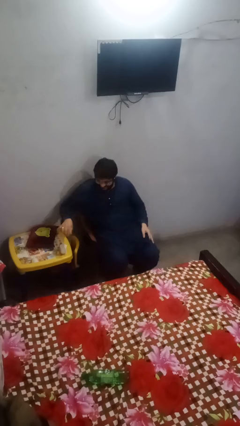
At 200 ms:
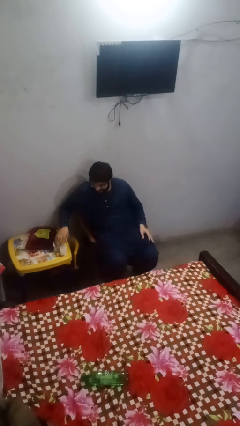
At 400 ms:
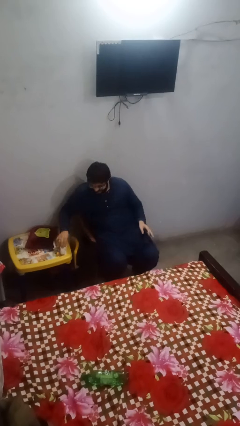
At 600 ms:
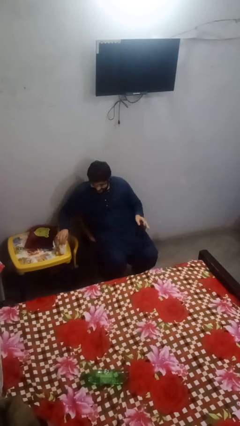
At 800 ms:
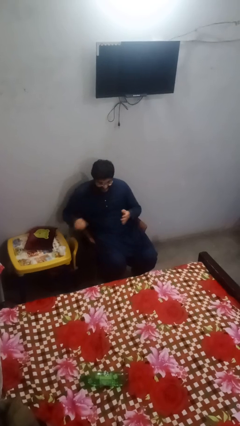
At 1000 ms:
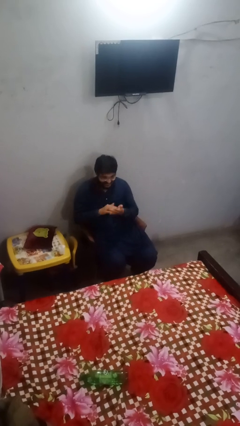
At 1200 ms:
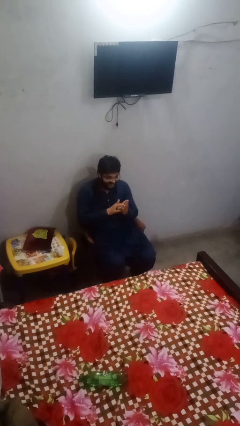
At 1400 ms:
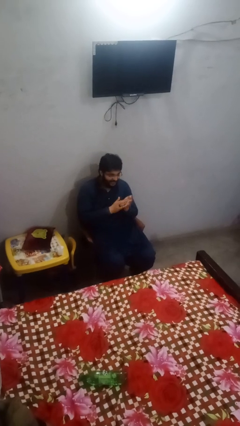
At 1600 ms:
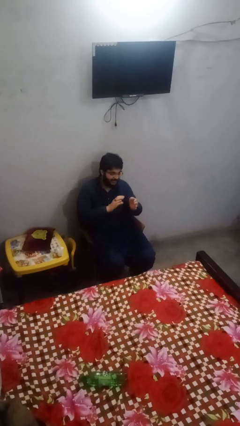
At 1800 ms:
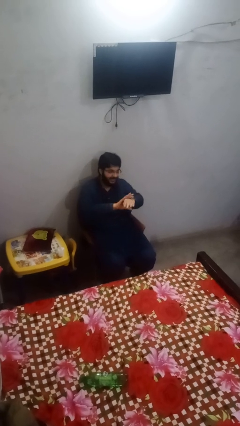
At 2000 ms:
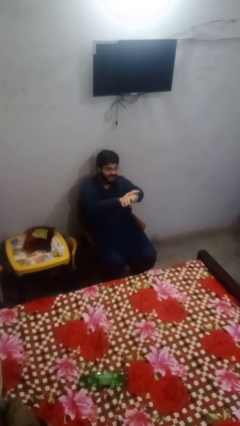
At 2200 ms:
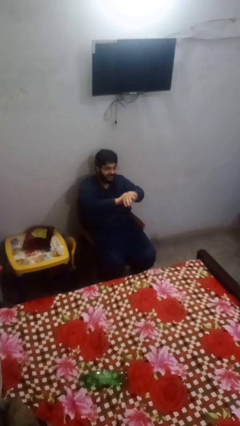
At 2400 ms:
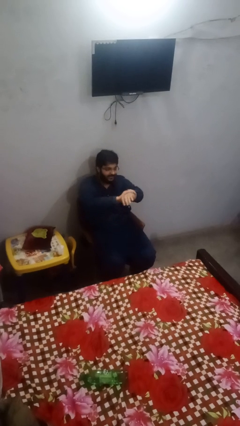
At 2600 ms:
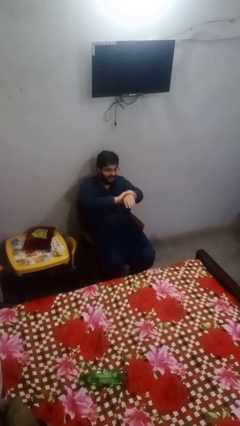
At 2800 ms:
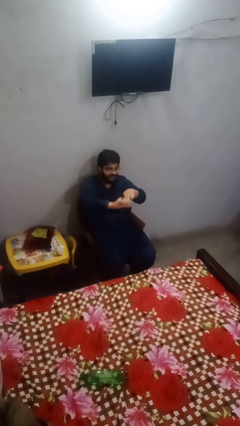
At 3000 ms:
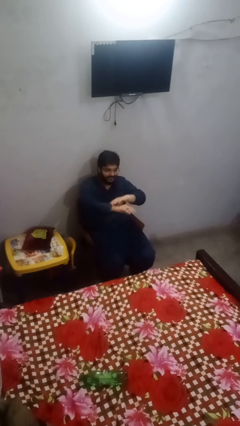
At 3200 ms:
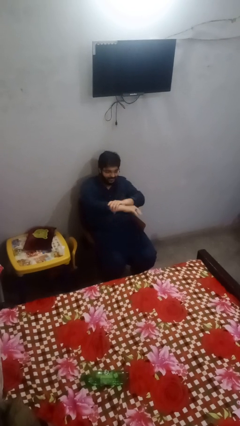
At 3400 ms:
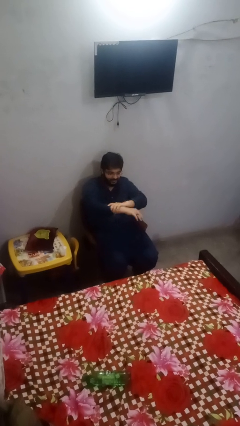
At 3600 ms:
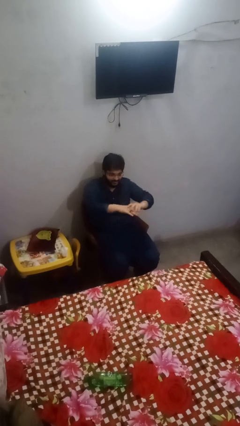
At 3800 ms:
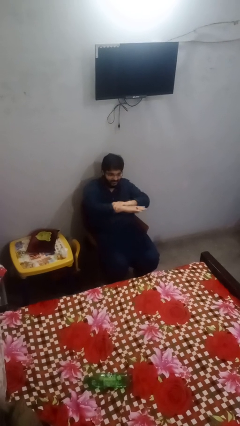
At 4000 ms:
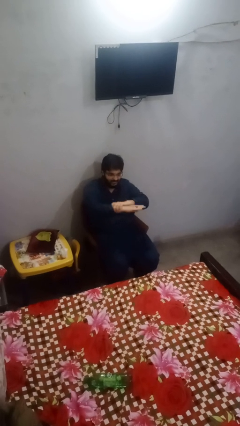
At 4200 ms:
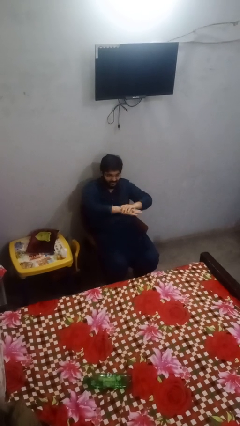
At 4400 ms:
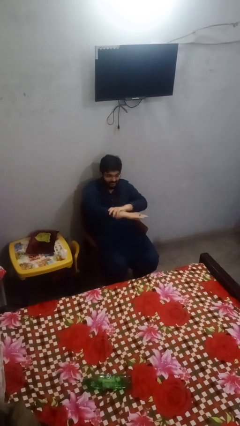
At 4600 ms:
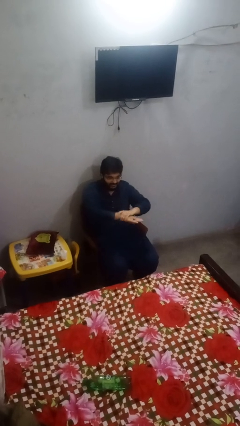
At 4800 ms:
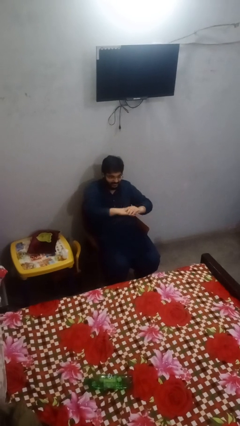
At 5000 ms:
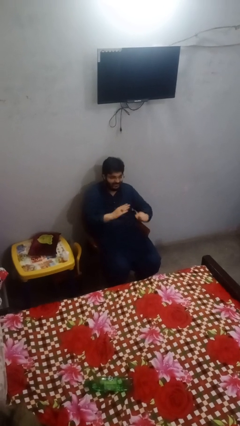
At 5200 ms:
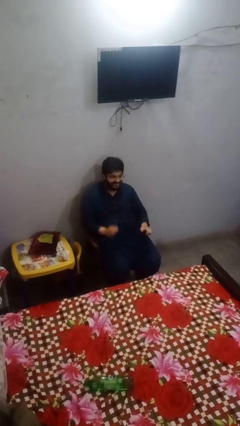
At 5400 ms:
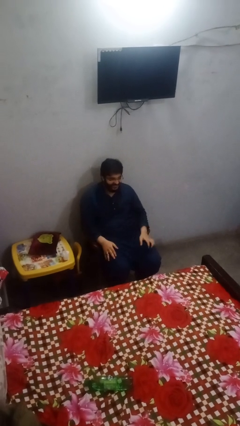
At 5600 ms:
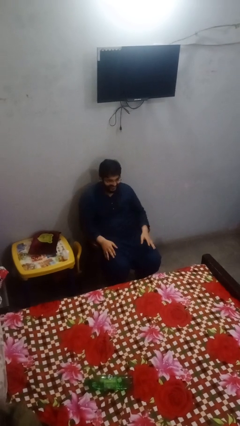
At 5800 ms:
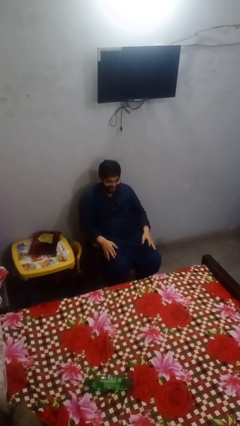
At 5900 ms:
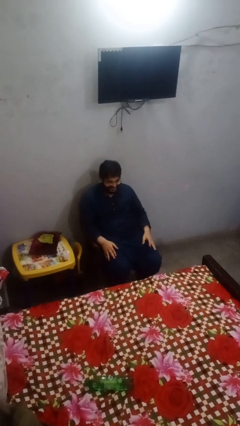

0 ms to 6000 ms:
person applies sunscreen

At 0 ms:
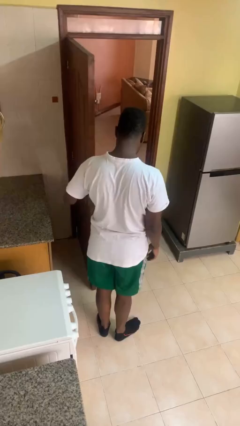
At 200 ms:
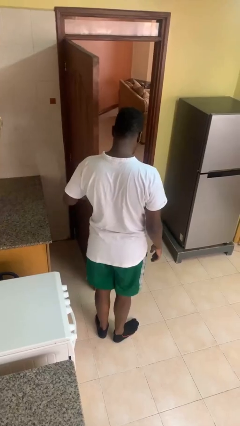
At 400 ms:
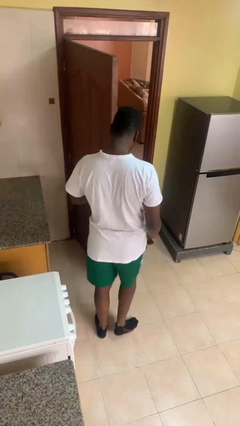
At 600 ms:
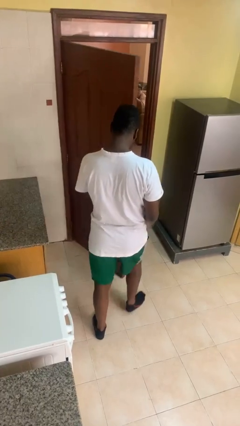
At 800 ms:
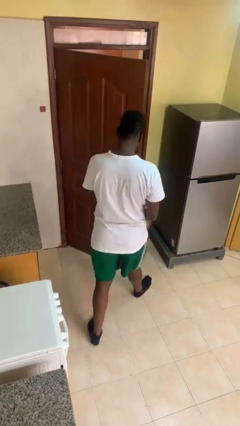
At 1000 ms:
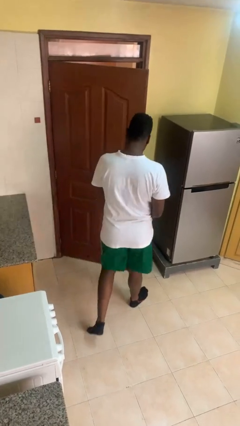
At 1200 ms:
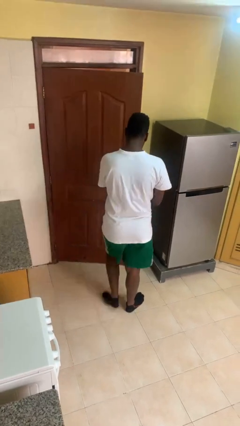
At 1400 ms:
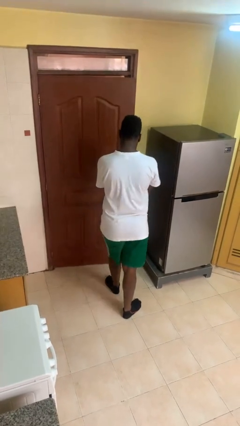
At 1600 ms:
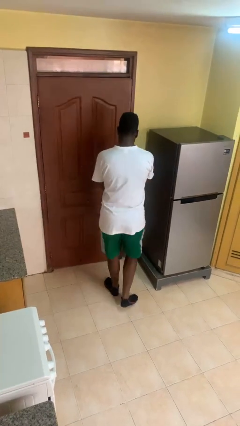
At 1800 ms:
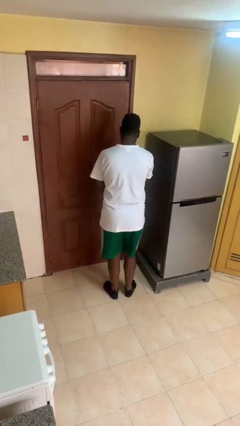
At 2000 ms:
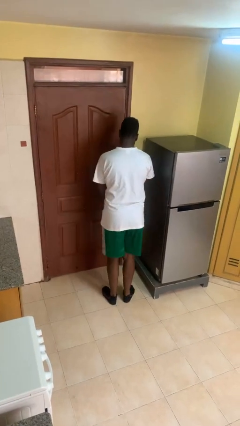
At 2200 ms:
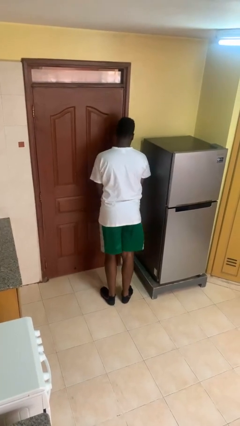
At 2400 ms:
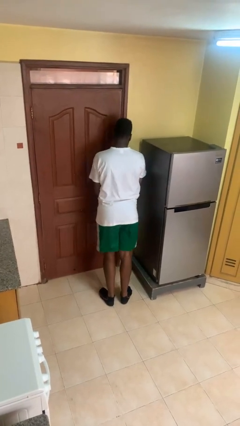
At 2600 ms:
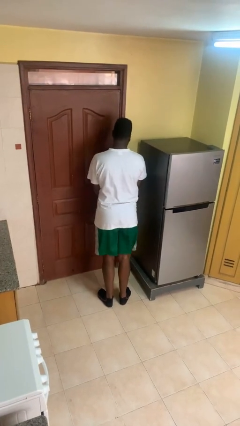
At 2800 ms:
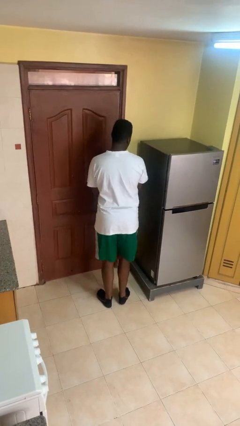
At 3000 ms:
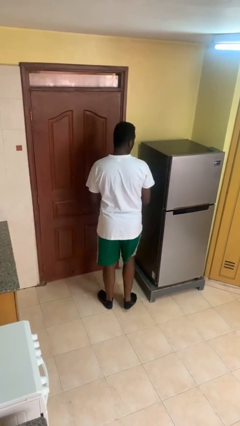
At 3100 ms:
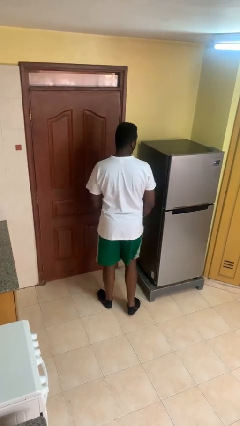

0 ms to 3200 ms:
person closes facility door

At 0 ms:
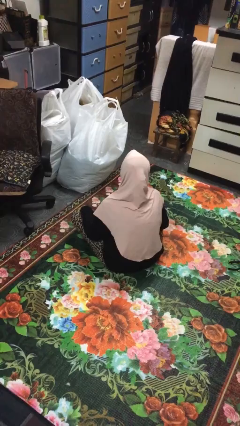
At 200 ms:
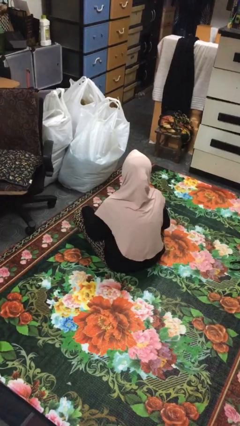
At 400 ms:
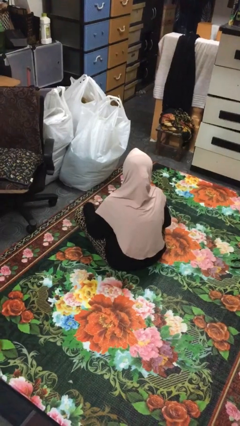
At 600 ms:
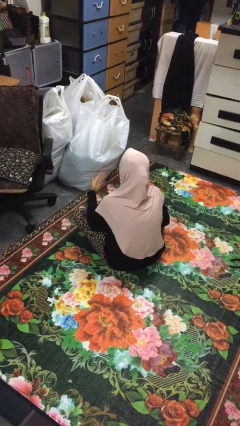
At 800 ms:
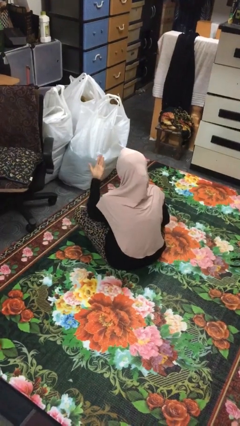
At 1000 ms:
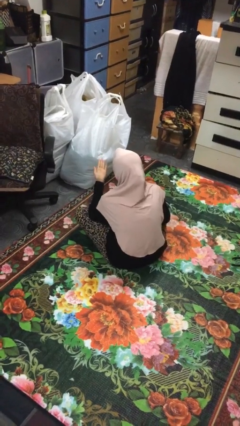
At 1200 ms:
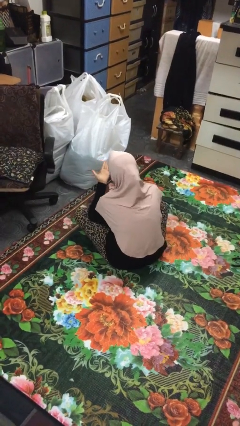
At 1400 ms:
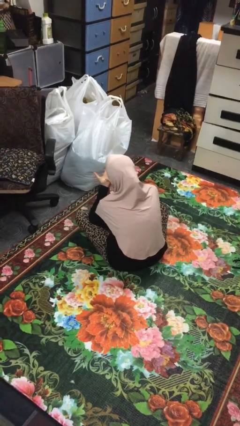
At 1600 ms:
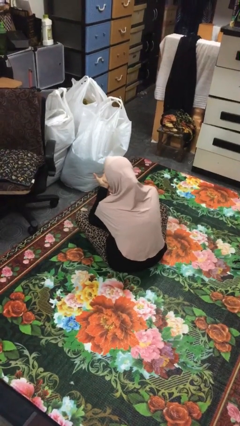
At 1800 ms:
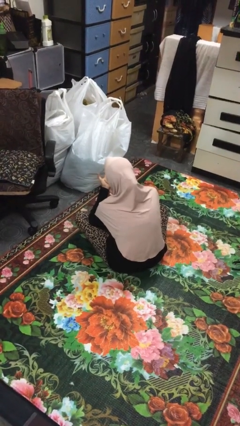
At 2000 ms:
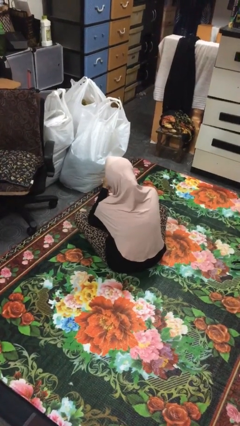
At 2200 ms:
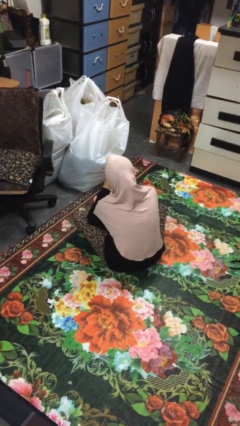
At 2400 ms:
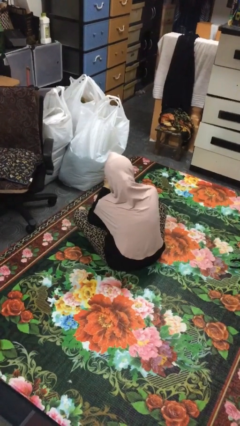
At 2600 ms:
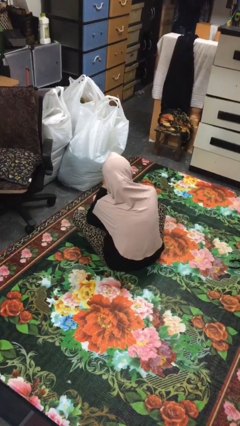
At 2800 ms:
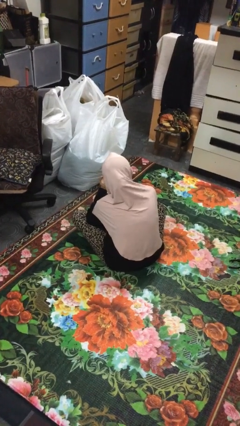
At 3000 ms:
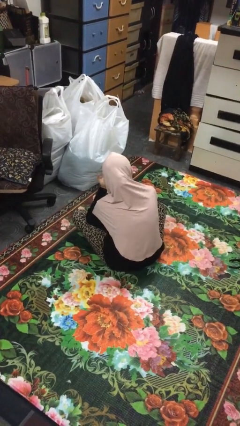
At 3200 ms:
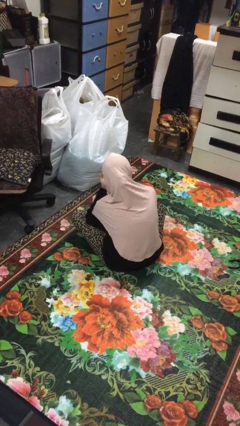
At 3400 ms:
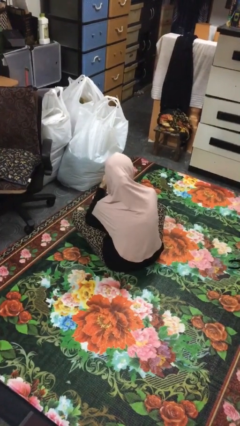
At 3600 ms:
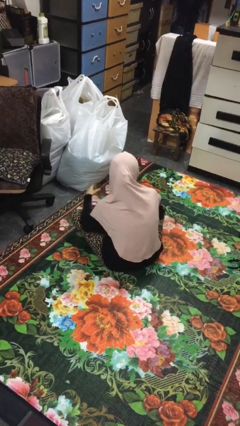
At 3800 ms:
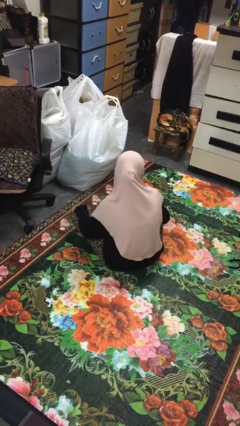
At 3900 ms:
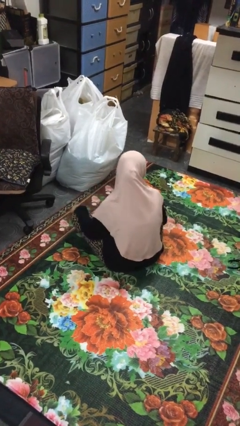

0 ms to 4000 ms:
person looks at hands in lap

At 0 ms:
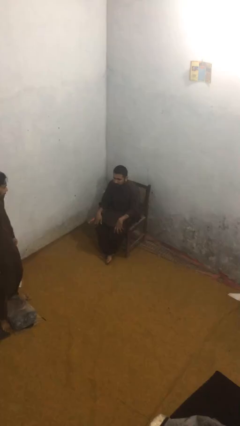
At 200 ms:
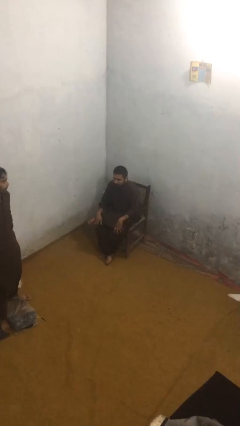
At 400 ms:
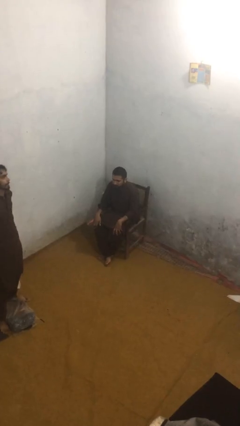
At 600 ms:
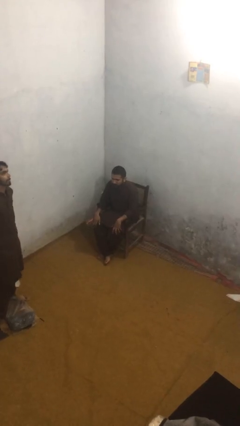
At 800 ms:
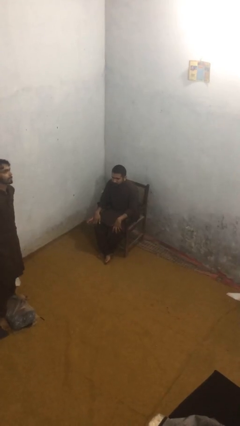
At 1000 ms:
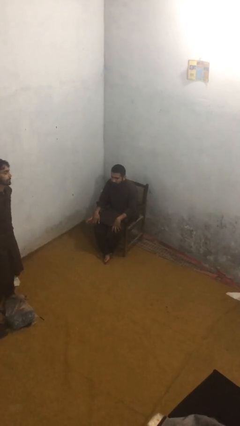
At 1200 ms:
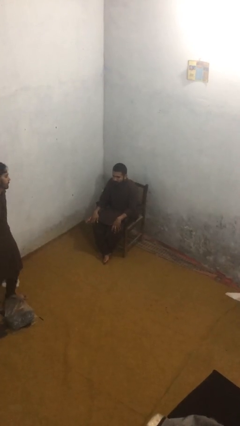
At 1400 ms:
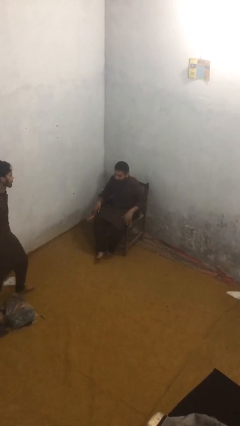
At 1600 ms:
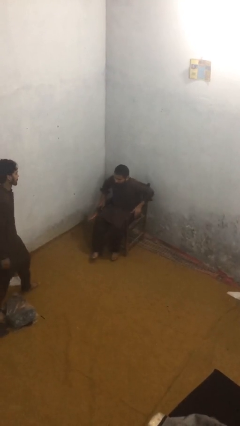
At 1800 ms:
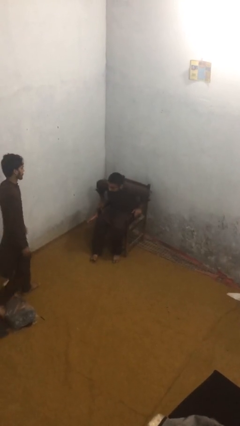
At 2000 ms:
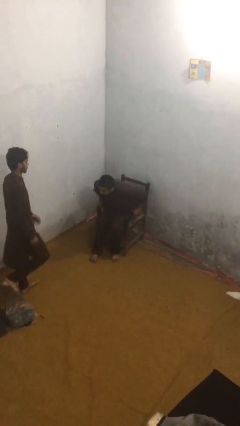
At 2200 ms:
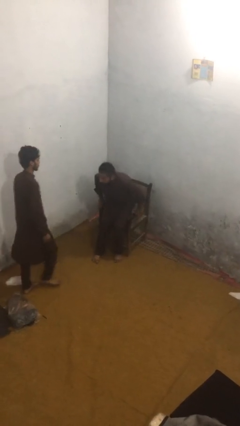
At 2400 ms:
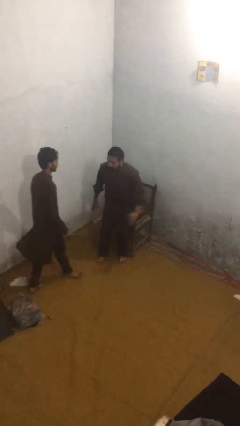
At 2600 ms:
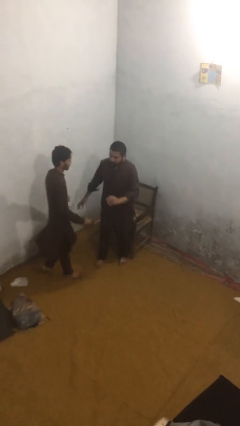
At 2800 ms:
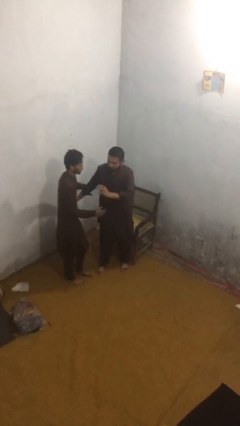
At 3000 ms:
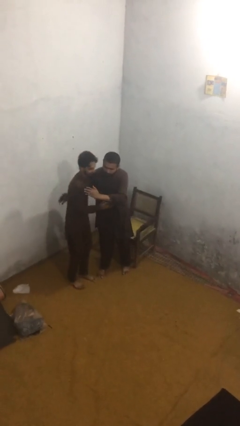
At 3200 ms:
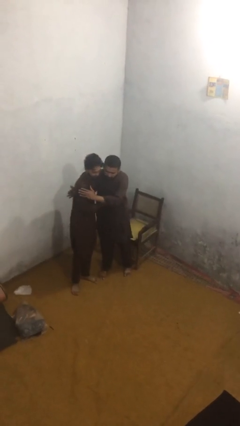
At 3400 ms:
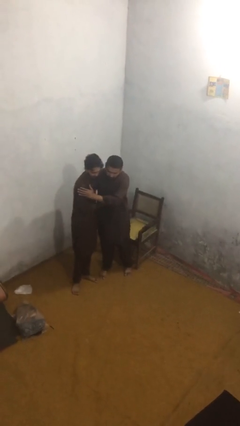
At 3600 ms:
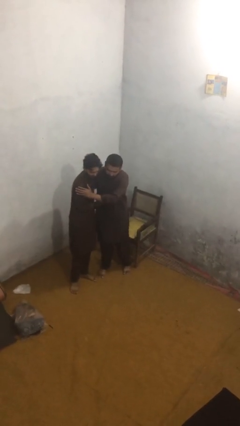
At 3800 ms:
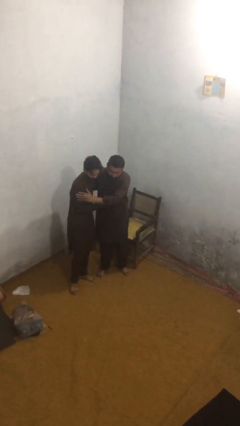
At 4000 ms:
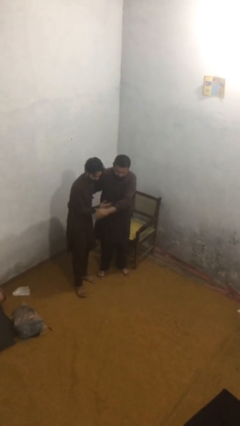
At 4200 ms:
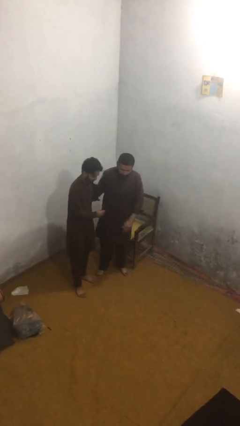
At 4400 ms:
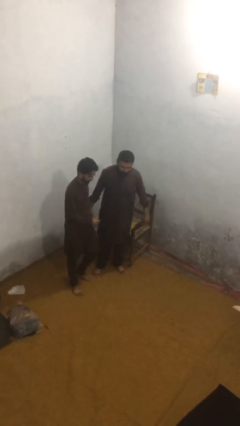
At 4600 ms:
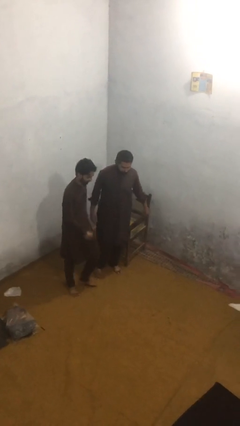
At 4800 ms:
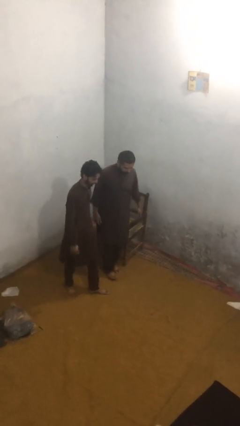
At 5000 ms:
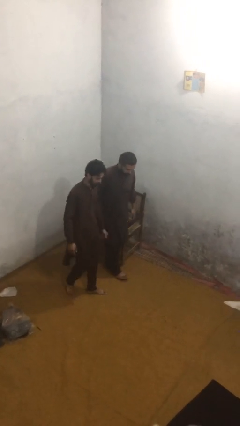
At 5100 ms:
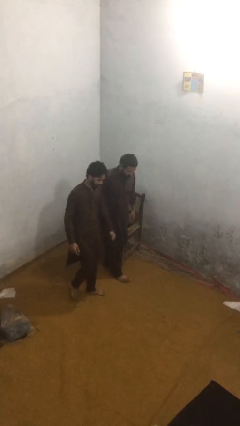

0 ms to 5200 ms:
person embraces person
